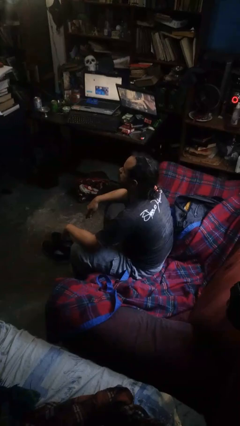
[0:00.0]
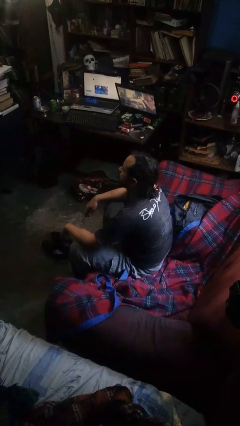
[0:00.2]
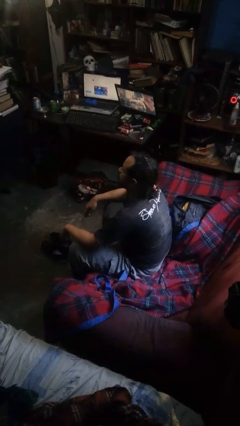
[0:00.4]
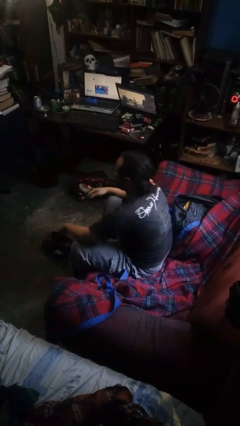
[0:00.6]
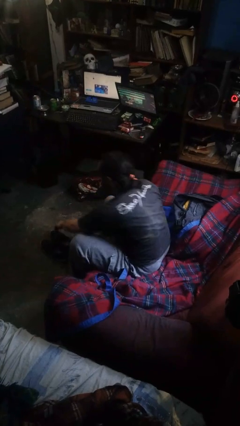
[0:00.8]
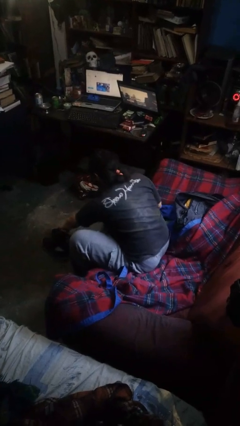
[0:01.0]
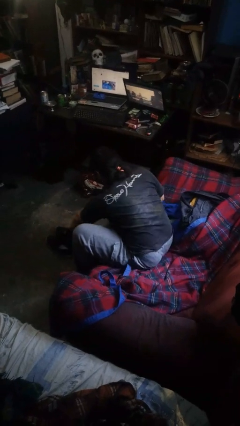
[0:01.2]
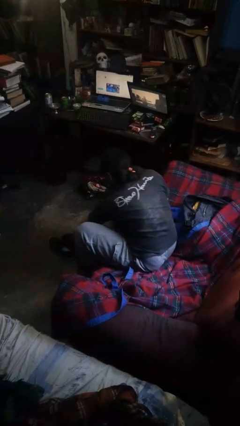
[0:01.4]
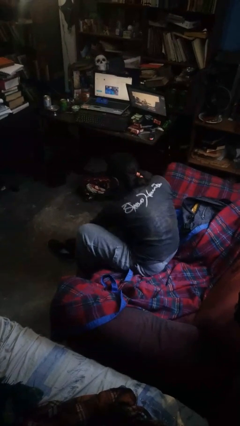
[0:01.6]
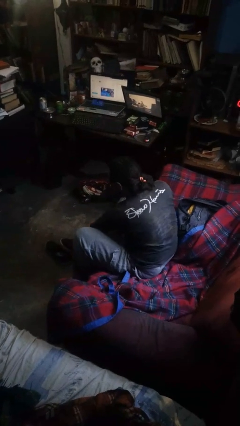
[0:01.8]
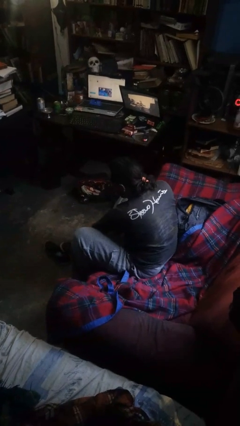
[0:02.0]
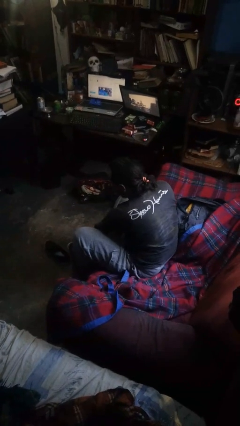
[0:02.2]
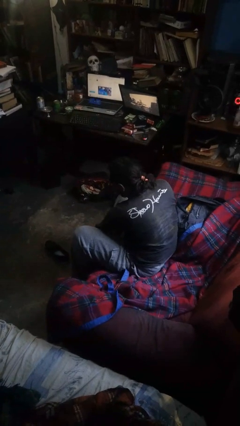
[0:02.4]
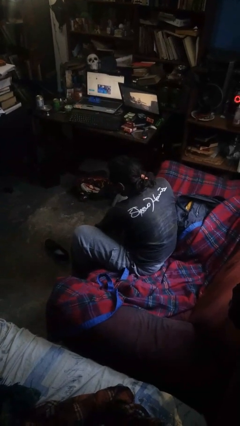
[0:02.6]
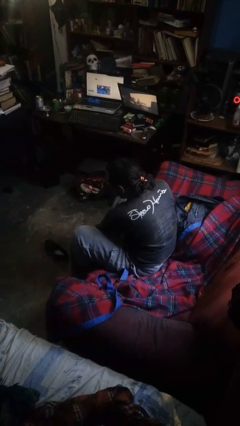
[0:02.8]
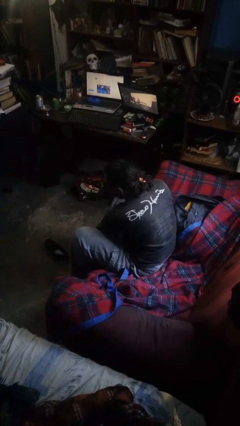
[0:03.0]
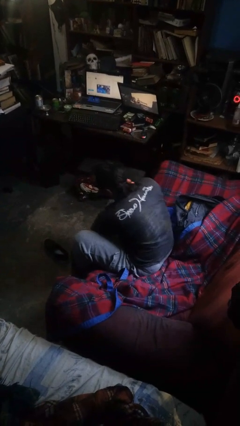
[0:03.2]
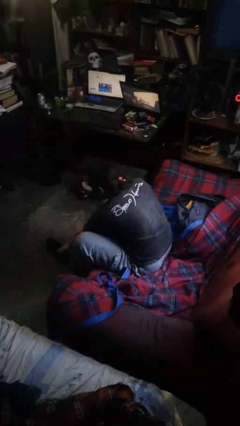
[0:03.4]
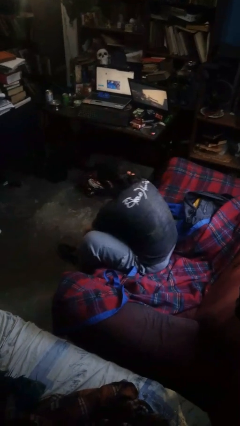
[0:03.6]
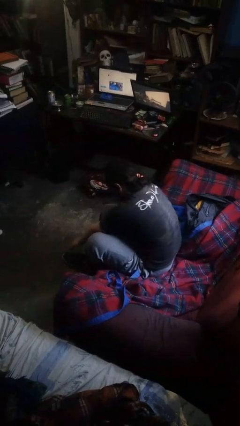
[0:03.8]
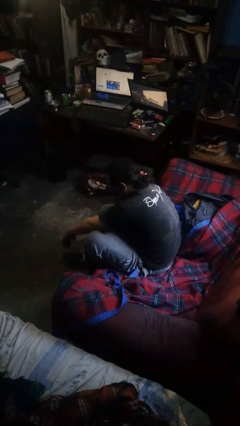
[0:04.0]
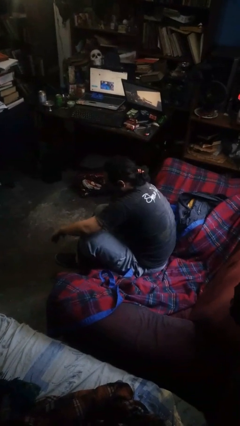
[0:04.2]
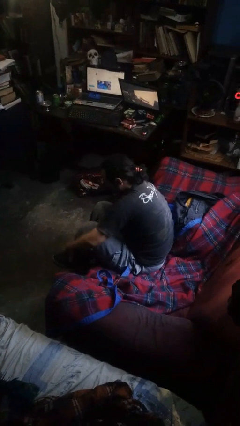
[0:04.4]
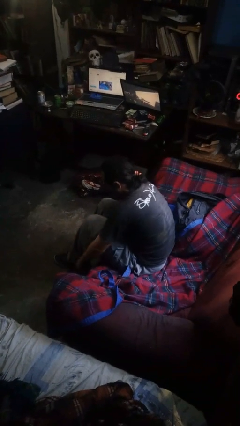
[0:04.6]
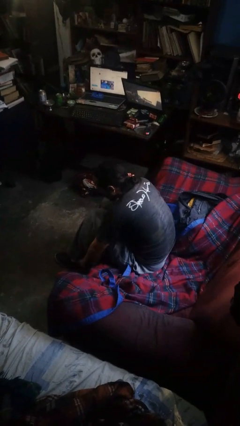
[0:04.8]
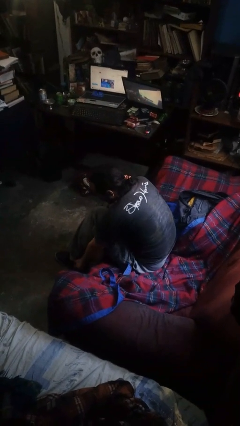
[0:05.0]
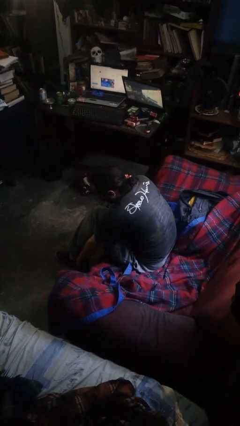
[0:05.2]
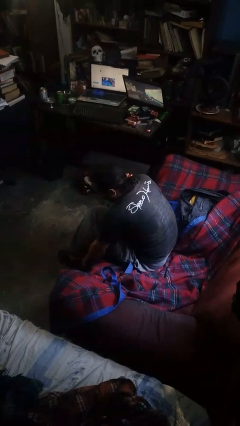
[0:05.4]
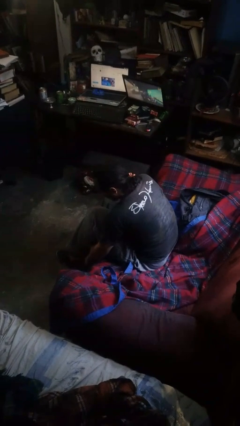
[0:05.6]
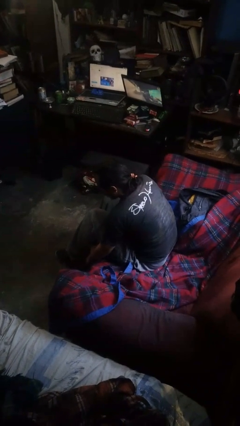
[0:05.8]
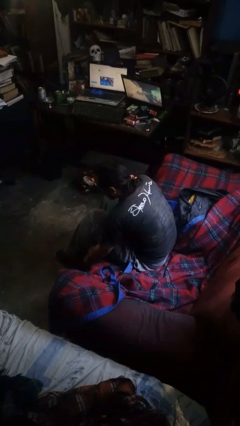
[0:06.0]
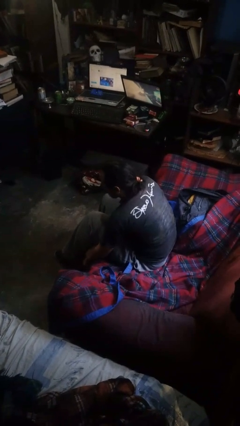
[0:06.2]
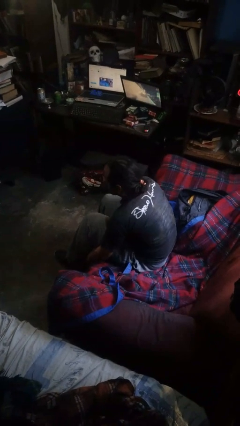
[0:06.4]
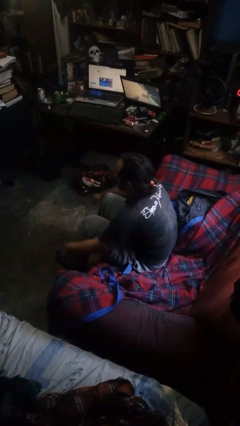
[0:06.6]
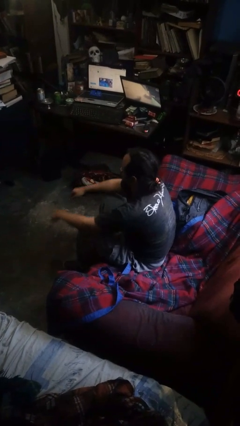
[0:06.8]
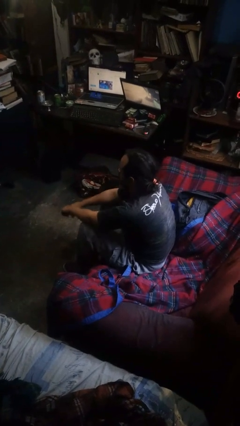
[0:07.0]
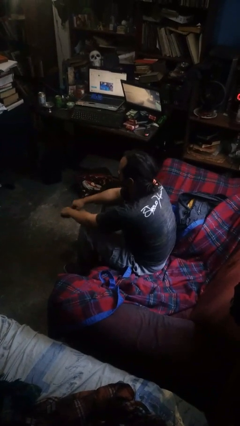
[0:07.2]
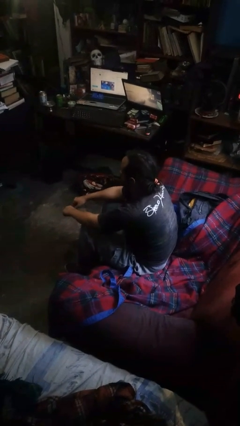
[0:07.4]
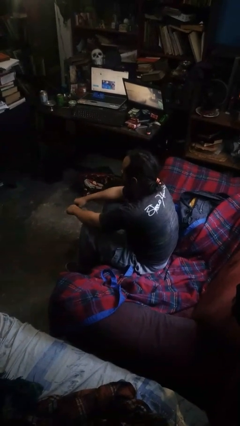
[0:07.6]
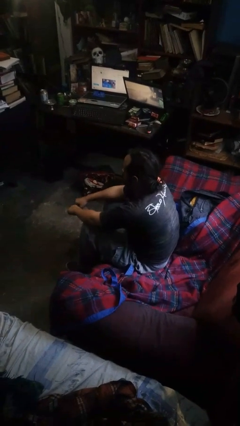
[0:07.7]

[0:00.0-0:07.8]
person puts on shoes

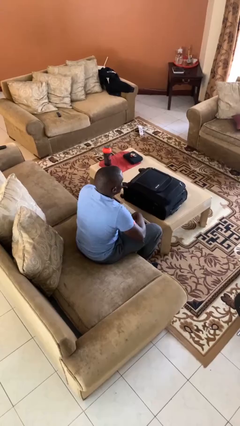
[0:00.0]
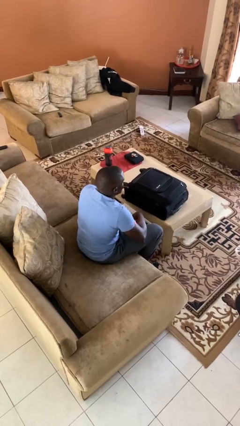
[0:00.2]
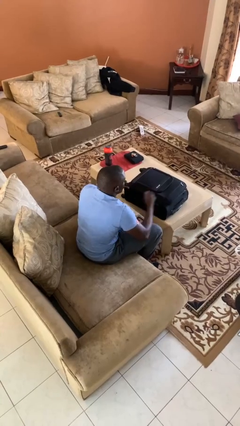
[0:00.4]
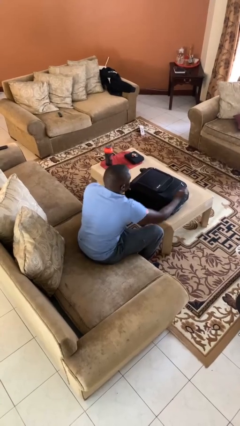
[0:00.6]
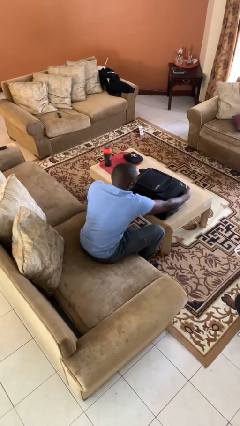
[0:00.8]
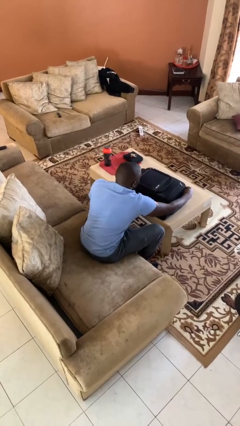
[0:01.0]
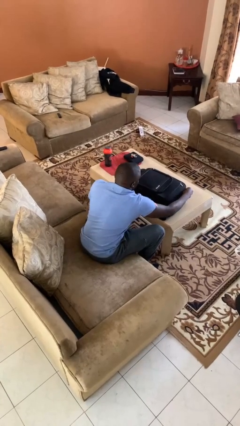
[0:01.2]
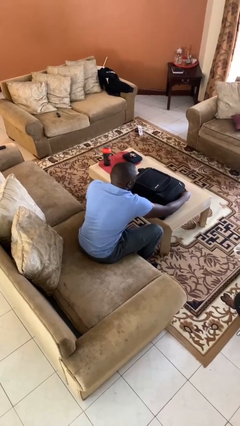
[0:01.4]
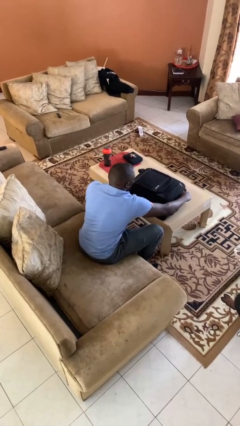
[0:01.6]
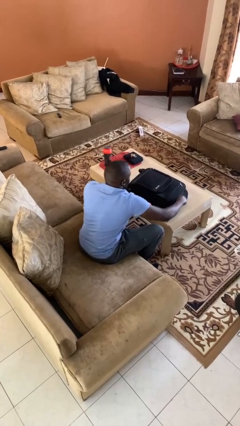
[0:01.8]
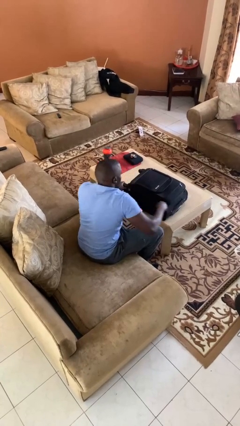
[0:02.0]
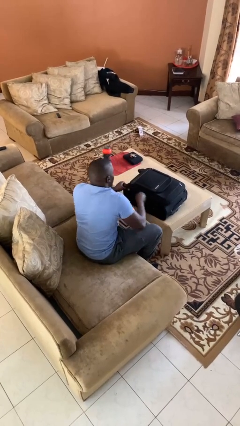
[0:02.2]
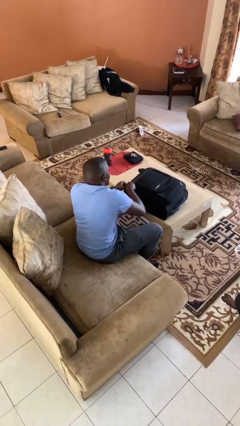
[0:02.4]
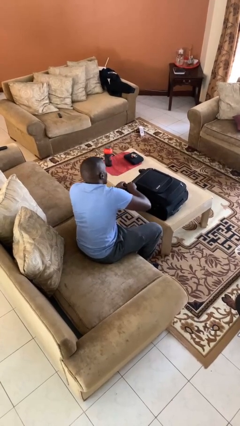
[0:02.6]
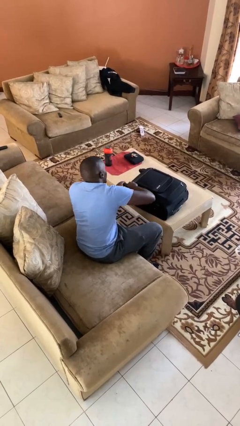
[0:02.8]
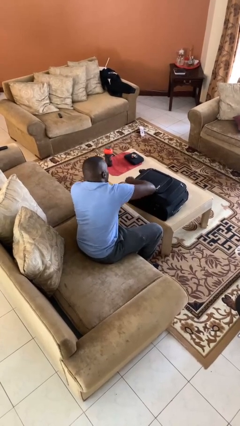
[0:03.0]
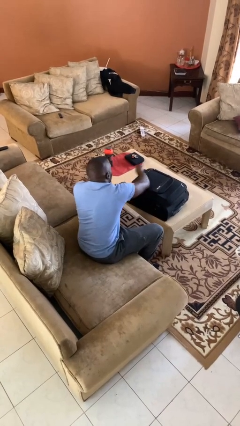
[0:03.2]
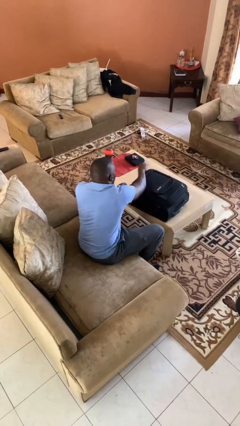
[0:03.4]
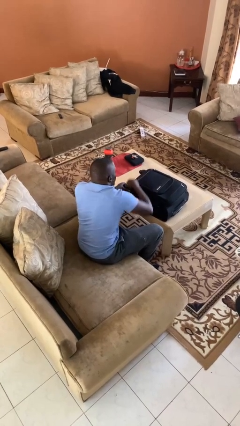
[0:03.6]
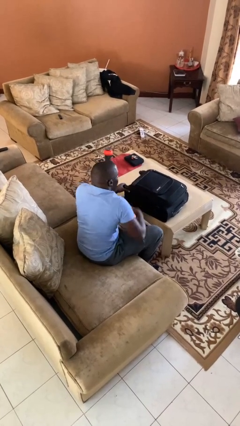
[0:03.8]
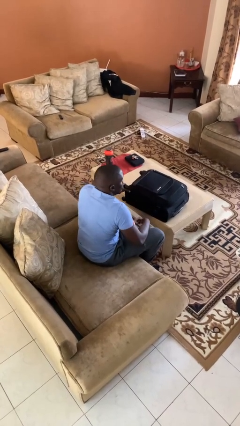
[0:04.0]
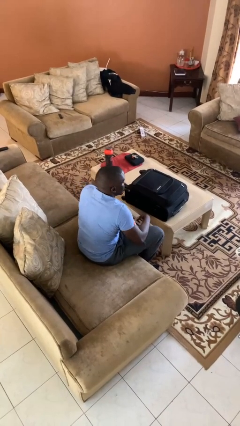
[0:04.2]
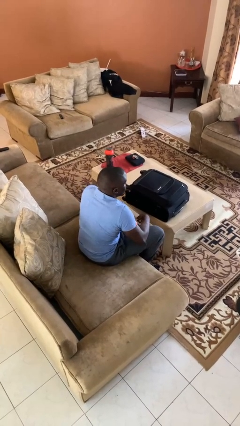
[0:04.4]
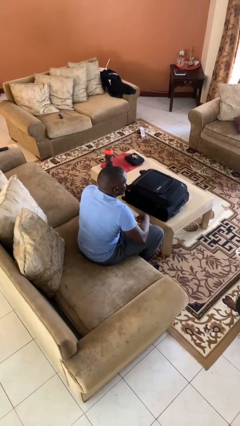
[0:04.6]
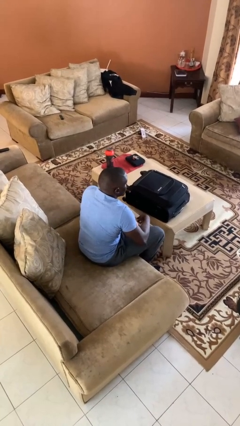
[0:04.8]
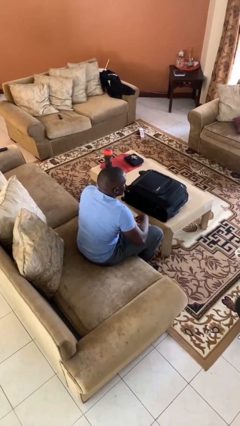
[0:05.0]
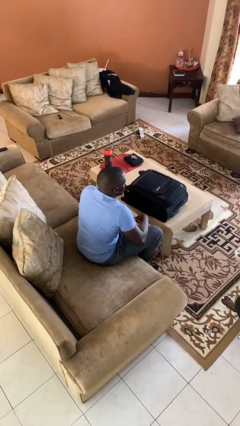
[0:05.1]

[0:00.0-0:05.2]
person opens suitcase

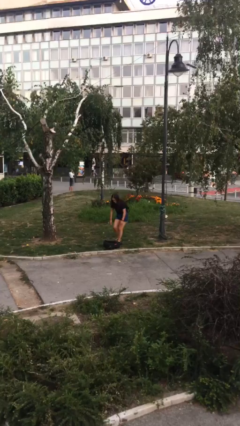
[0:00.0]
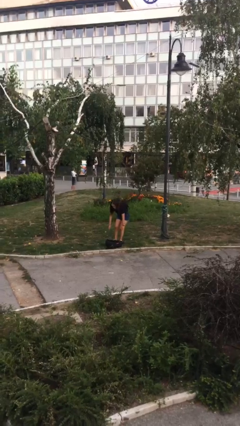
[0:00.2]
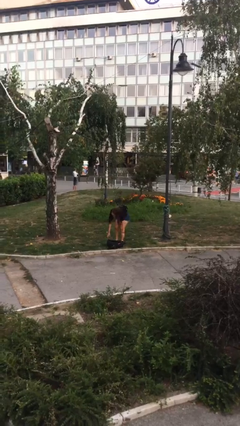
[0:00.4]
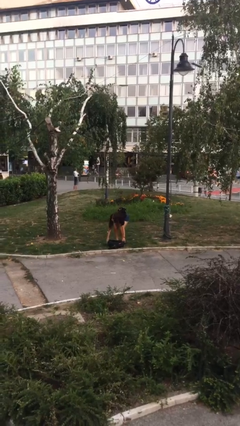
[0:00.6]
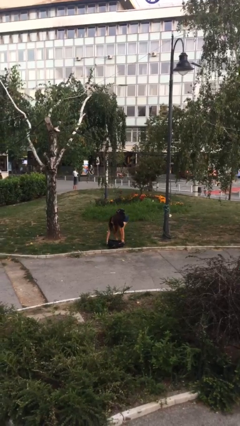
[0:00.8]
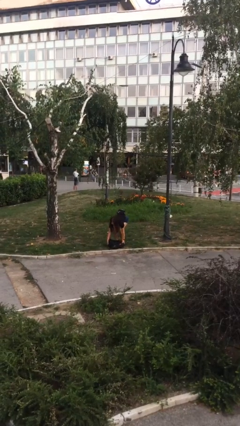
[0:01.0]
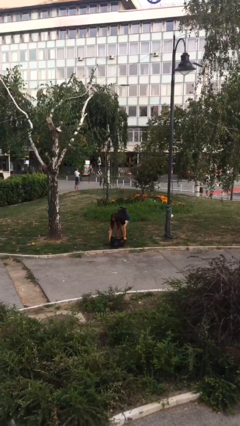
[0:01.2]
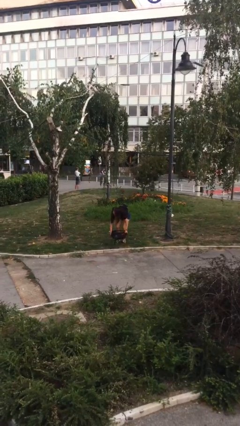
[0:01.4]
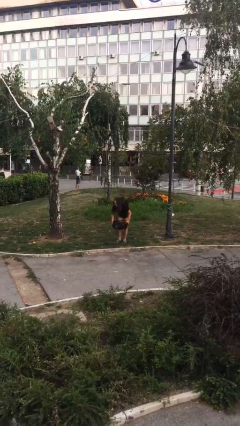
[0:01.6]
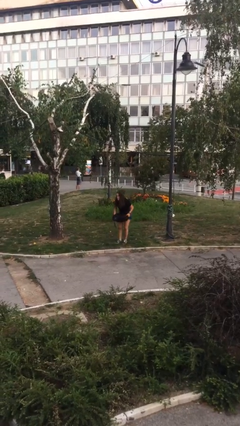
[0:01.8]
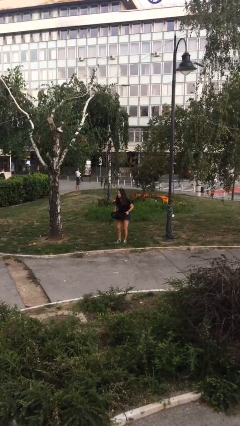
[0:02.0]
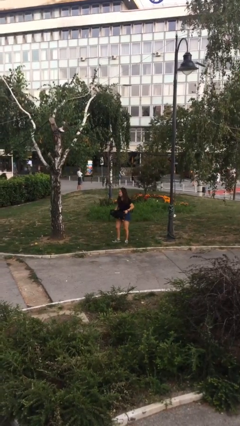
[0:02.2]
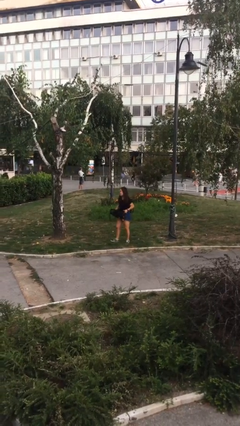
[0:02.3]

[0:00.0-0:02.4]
person picks up object from floor

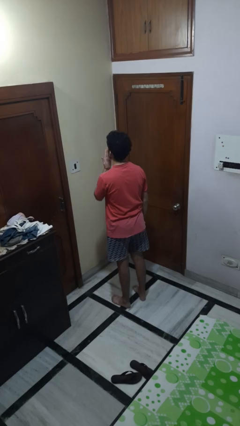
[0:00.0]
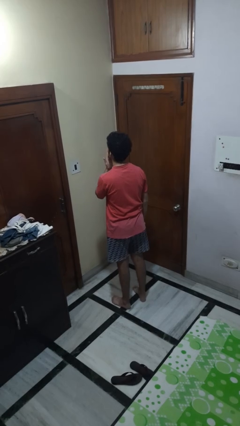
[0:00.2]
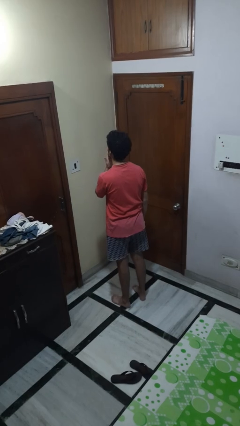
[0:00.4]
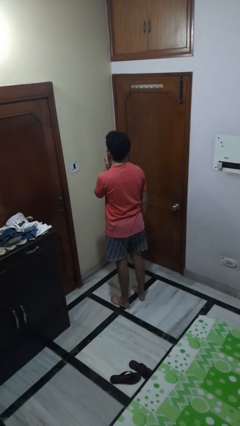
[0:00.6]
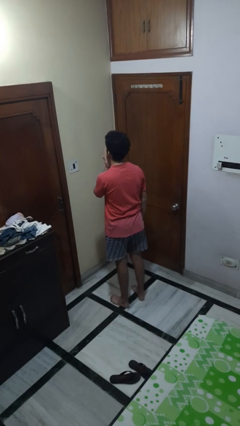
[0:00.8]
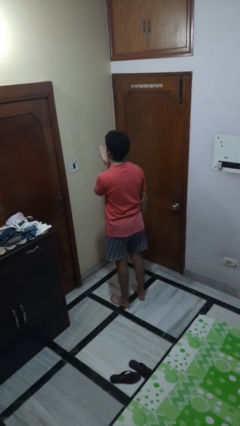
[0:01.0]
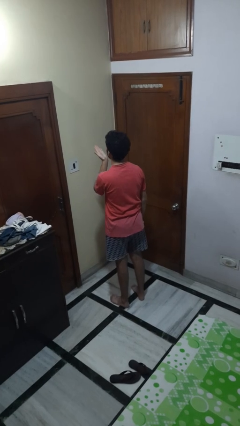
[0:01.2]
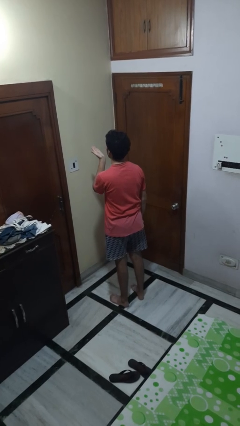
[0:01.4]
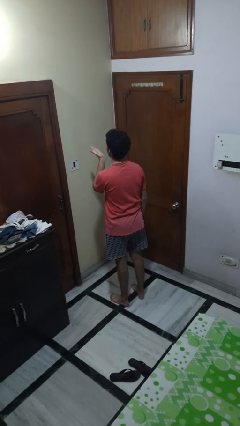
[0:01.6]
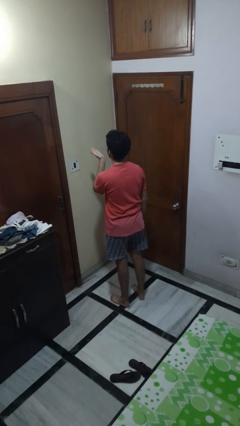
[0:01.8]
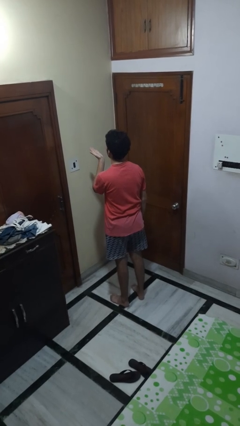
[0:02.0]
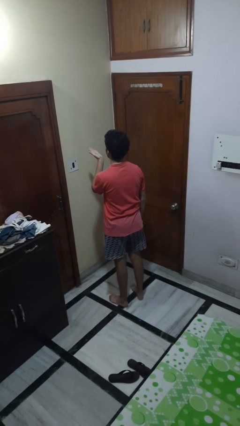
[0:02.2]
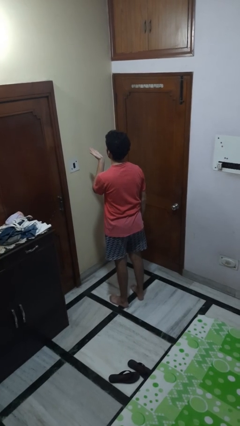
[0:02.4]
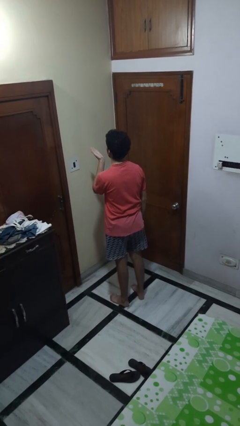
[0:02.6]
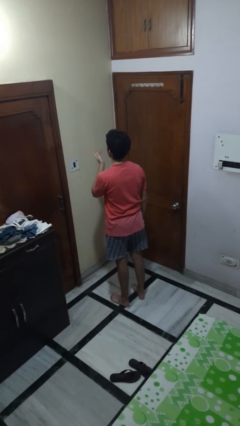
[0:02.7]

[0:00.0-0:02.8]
person gestures blow kiss
